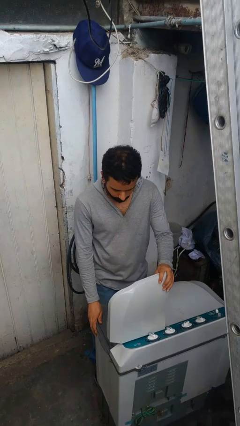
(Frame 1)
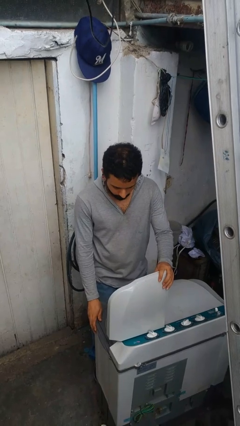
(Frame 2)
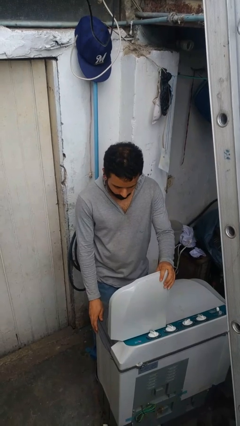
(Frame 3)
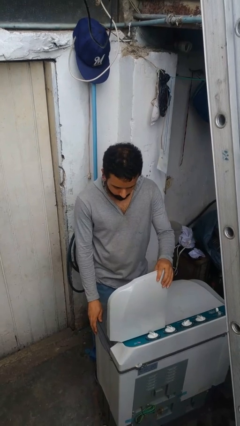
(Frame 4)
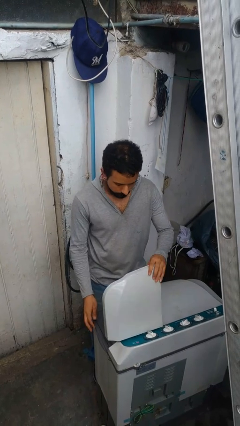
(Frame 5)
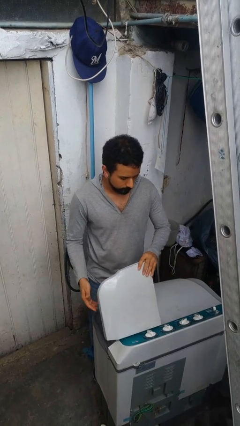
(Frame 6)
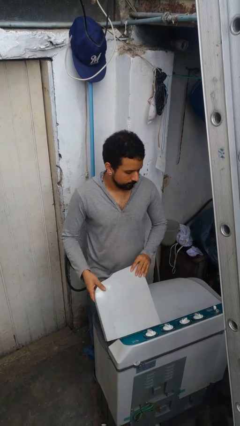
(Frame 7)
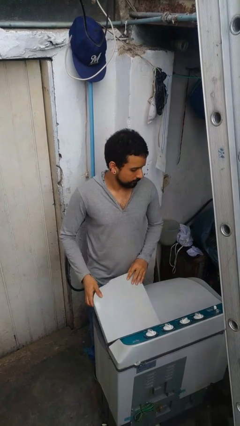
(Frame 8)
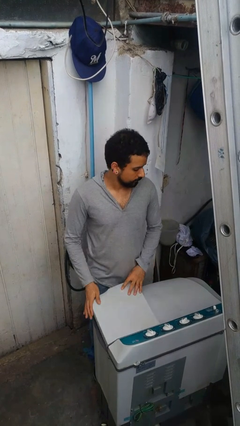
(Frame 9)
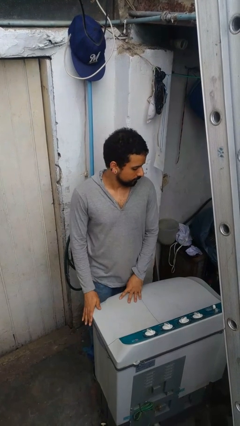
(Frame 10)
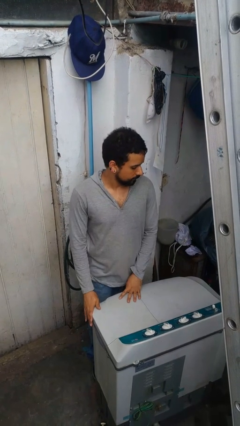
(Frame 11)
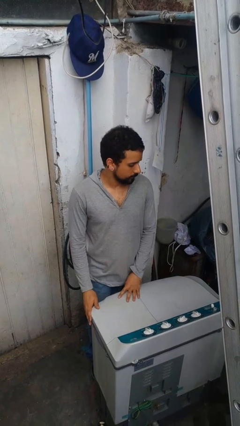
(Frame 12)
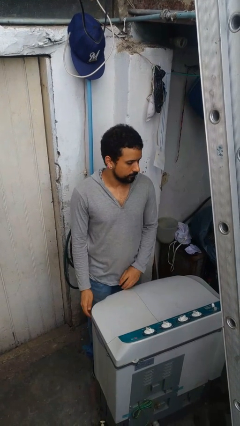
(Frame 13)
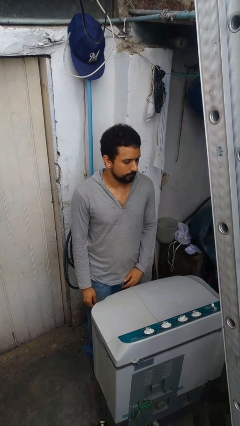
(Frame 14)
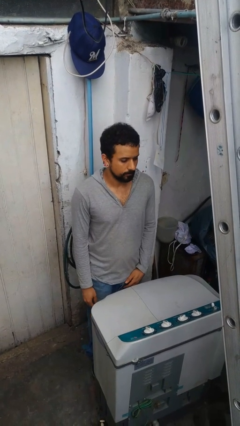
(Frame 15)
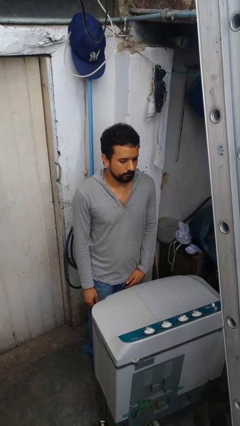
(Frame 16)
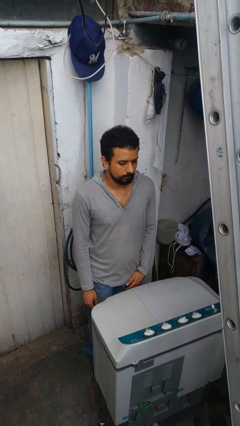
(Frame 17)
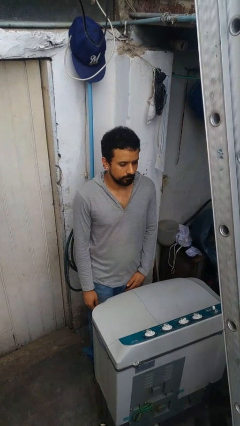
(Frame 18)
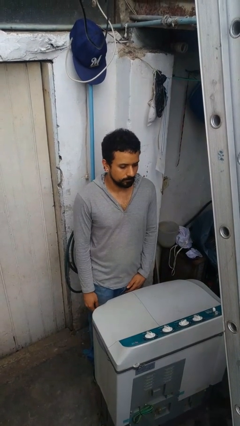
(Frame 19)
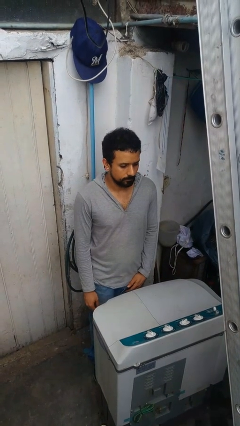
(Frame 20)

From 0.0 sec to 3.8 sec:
person closes clothes washer

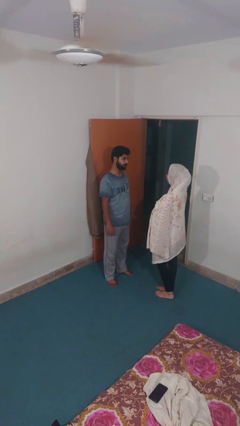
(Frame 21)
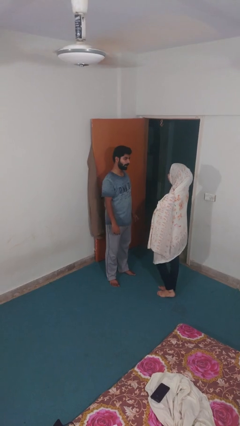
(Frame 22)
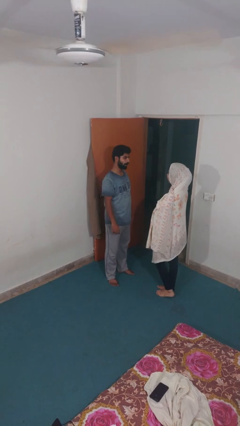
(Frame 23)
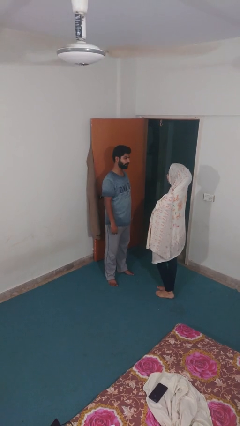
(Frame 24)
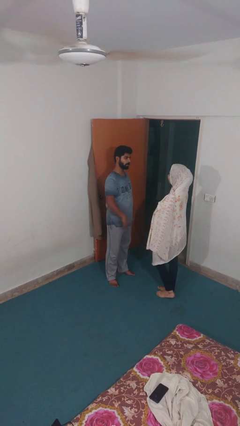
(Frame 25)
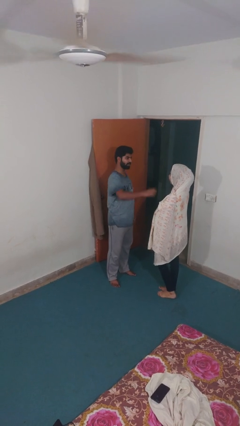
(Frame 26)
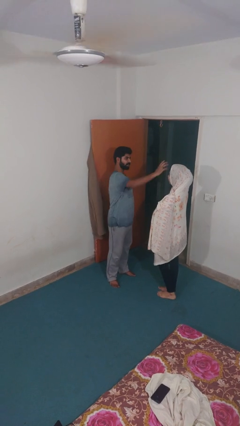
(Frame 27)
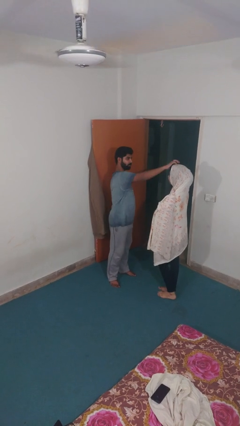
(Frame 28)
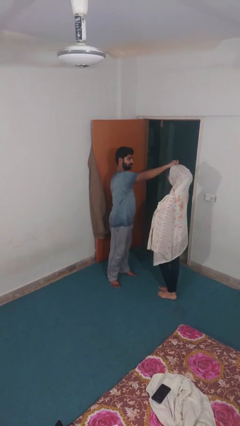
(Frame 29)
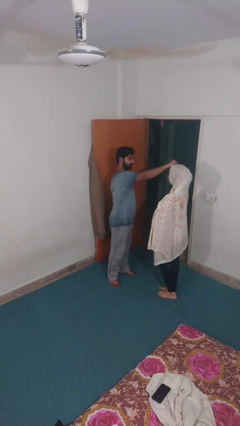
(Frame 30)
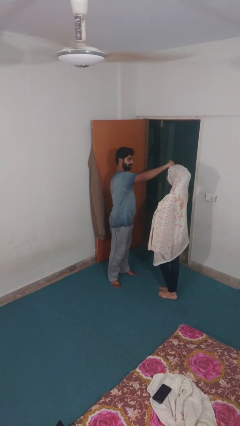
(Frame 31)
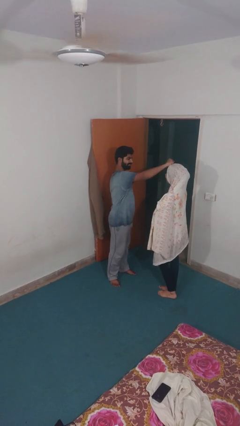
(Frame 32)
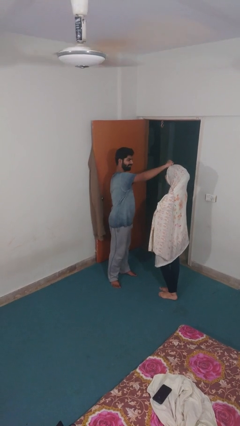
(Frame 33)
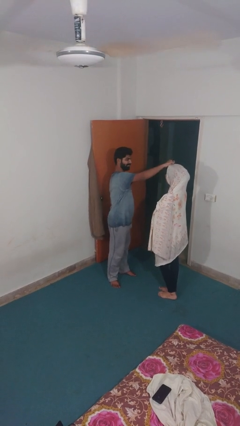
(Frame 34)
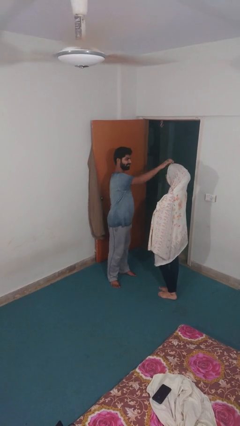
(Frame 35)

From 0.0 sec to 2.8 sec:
person grabs person by hair

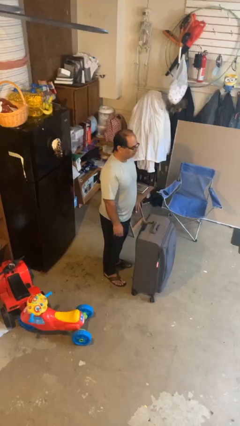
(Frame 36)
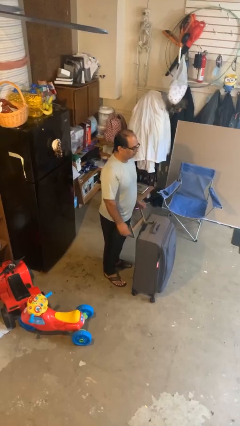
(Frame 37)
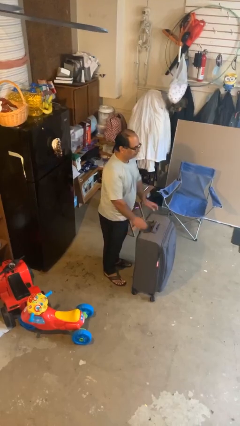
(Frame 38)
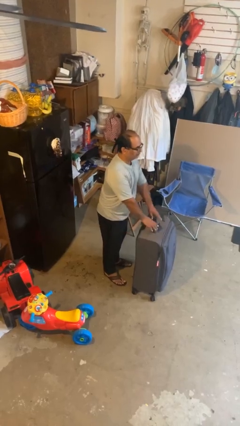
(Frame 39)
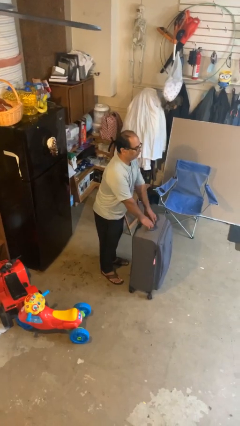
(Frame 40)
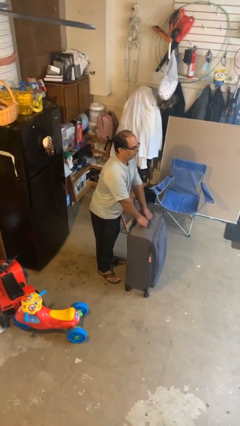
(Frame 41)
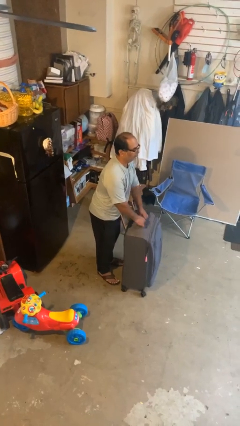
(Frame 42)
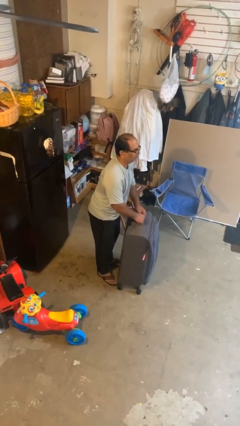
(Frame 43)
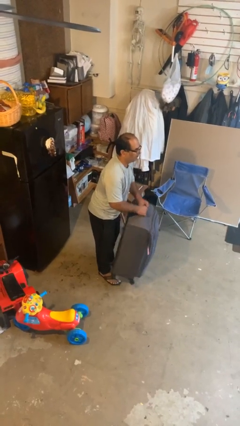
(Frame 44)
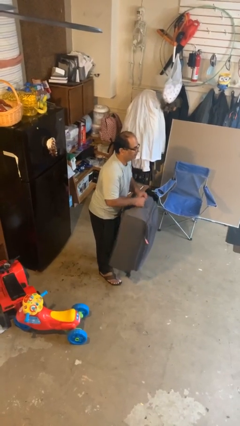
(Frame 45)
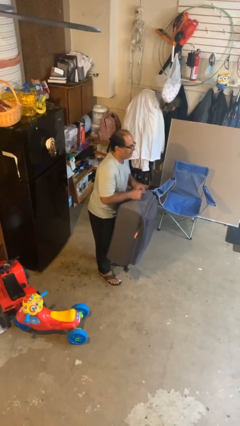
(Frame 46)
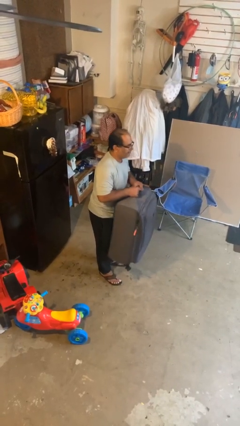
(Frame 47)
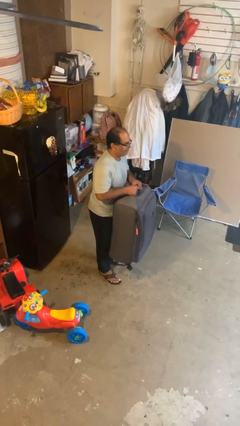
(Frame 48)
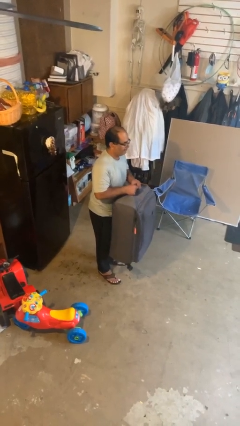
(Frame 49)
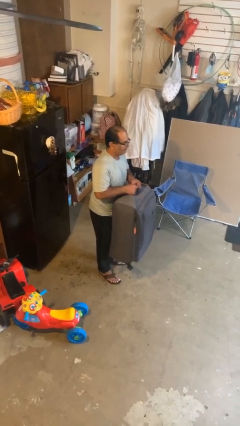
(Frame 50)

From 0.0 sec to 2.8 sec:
person picks up object from floor

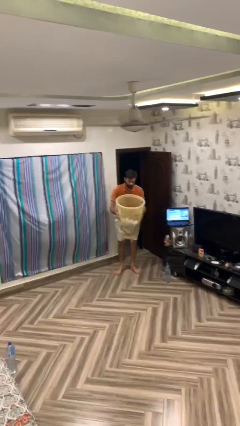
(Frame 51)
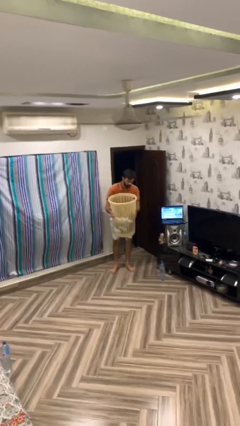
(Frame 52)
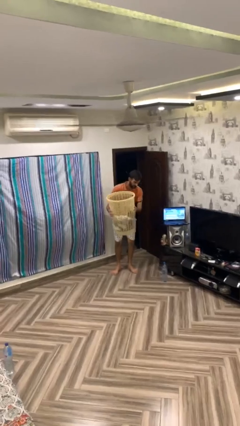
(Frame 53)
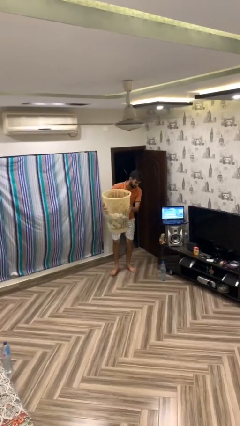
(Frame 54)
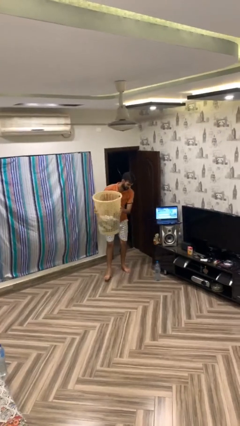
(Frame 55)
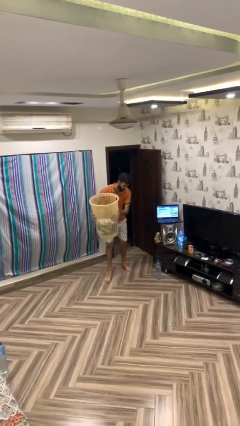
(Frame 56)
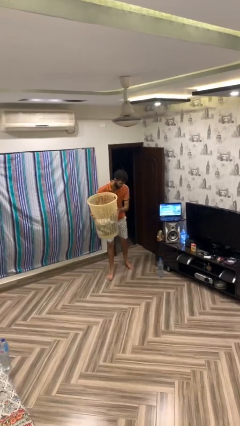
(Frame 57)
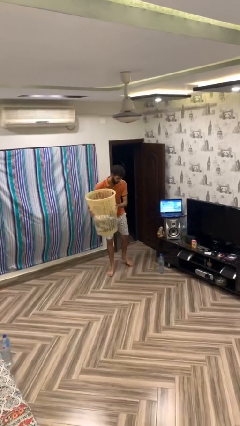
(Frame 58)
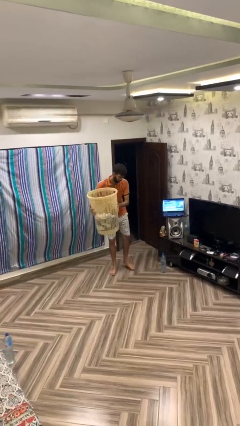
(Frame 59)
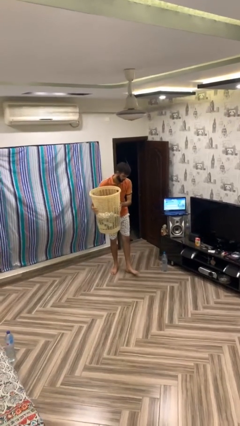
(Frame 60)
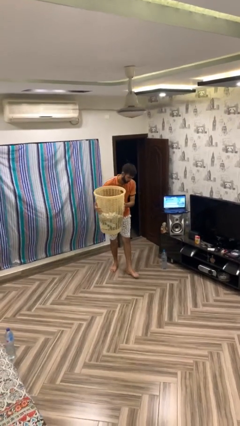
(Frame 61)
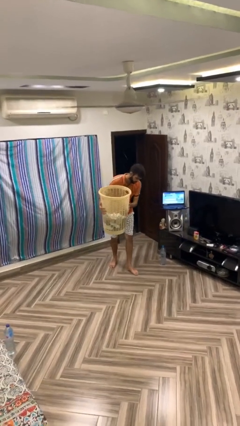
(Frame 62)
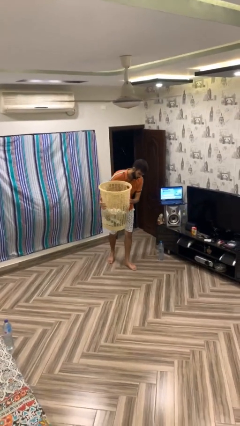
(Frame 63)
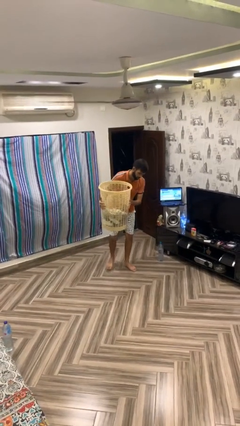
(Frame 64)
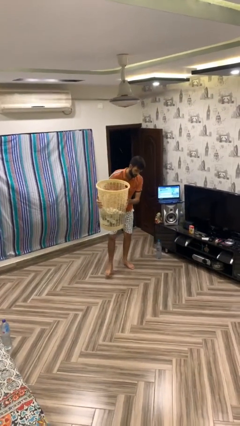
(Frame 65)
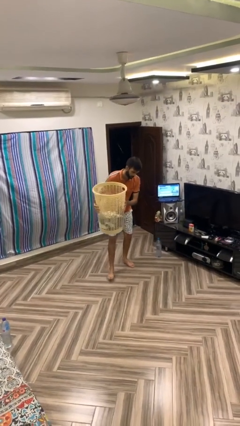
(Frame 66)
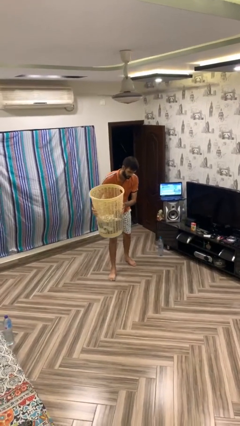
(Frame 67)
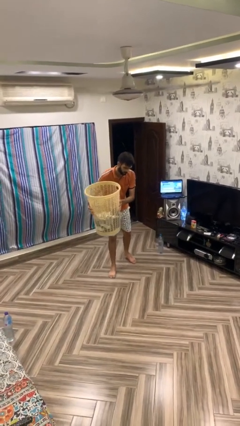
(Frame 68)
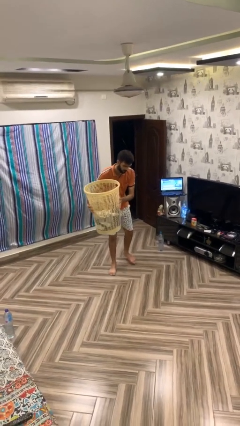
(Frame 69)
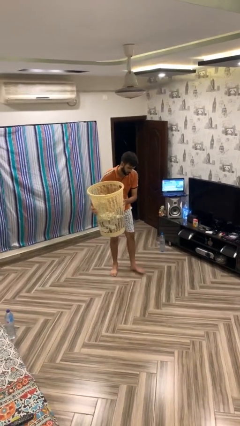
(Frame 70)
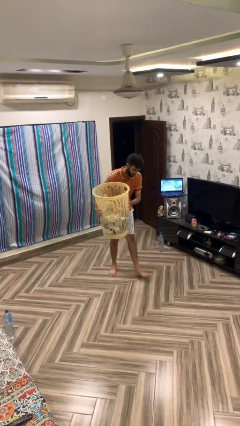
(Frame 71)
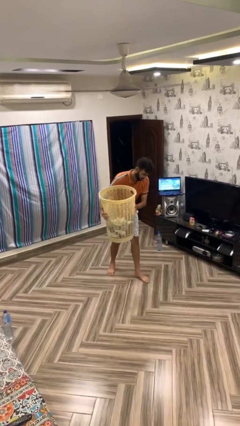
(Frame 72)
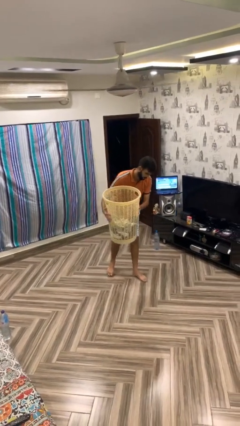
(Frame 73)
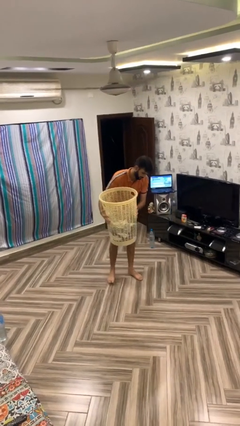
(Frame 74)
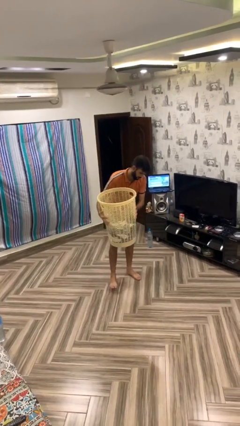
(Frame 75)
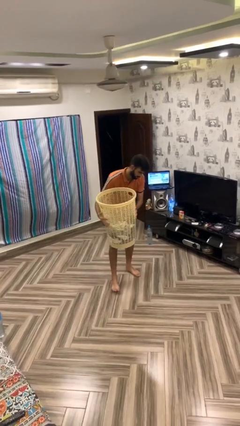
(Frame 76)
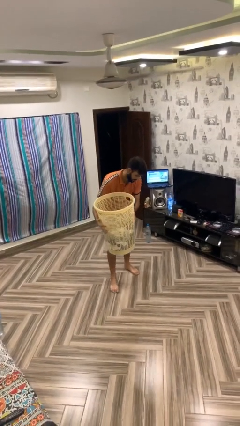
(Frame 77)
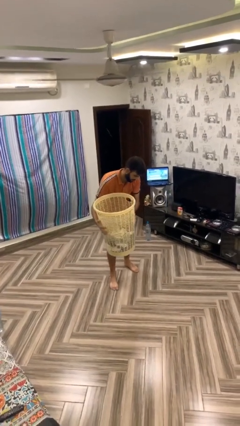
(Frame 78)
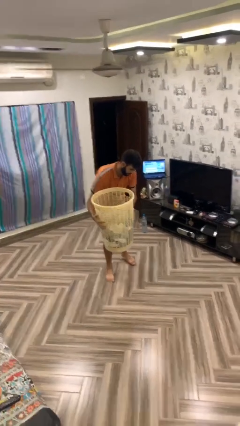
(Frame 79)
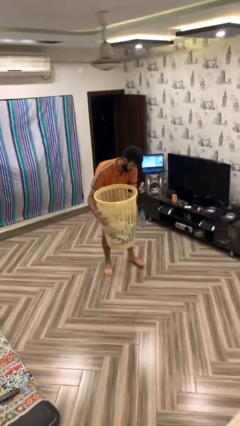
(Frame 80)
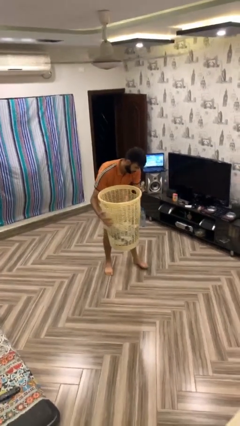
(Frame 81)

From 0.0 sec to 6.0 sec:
person carries heavy object

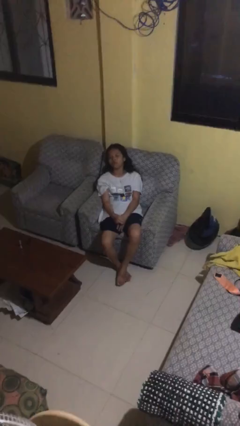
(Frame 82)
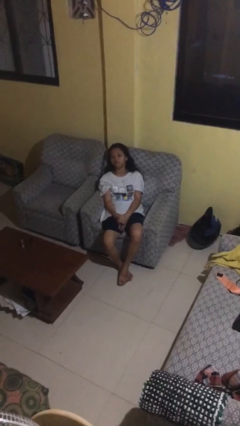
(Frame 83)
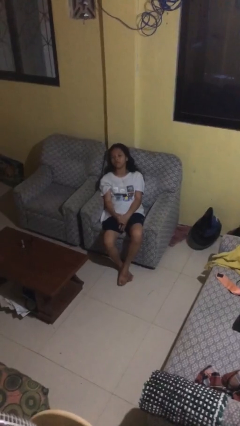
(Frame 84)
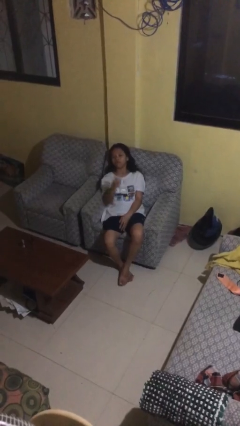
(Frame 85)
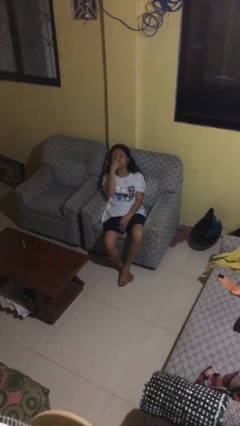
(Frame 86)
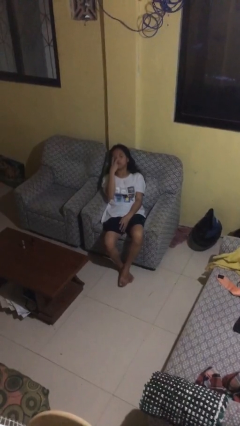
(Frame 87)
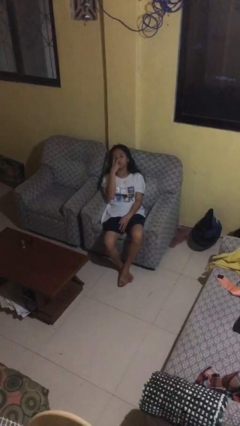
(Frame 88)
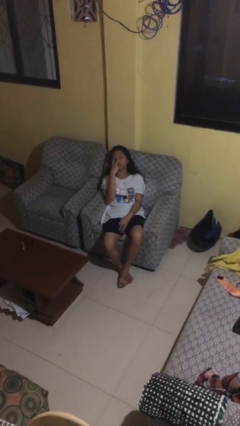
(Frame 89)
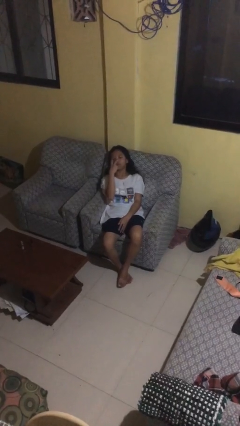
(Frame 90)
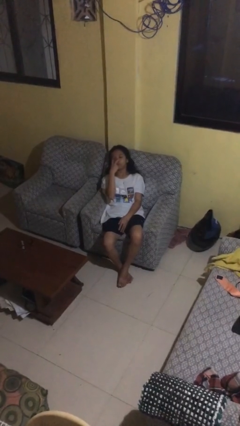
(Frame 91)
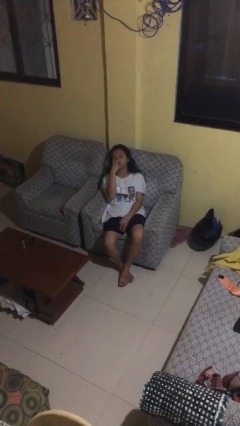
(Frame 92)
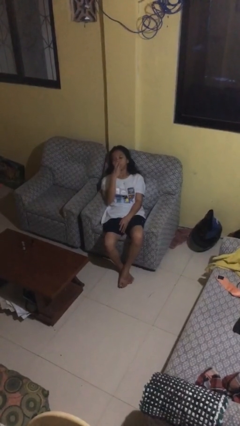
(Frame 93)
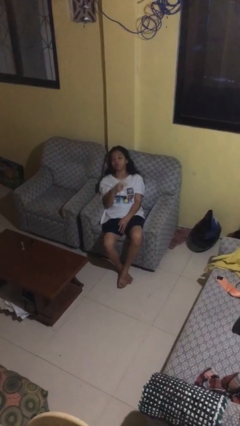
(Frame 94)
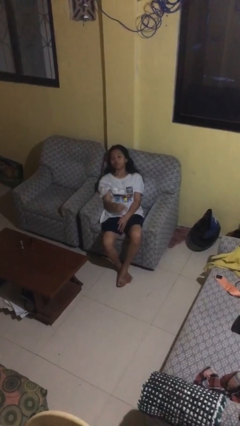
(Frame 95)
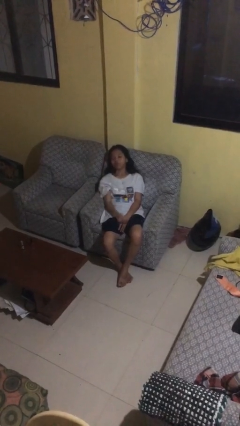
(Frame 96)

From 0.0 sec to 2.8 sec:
person gestures watch closely
